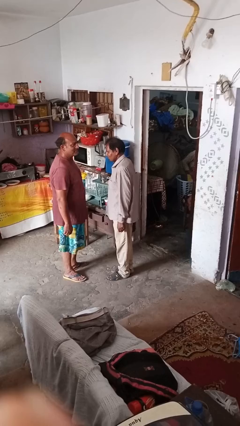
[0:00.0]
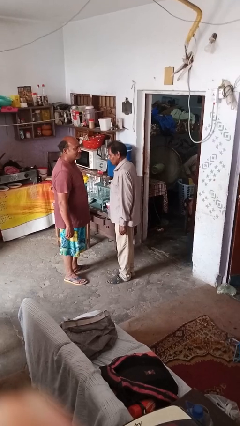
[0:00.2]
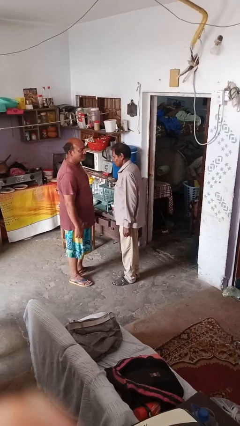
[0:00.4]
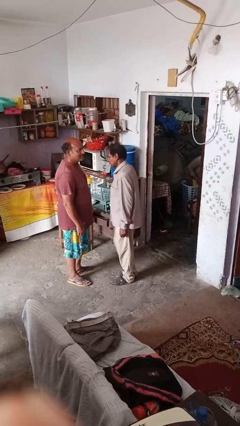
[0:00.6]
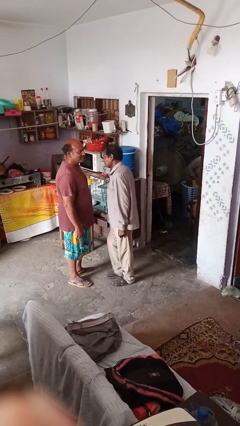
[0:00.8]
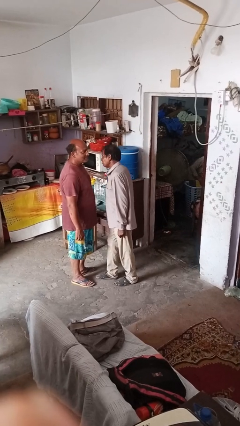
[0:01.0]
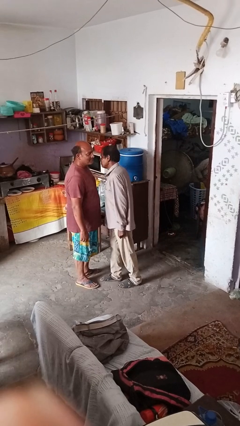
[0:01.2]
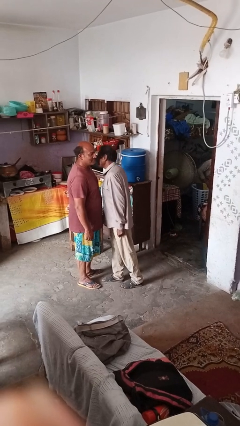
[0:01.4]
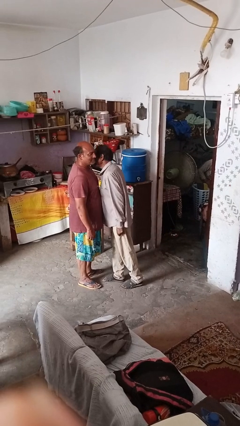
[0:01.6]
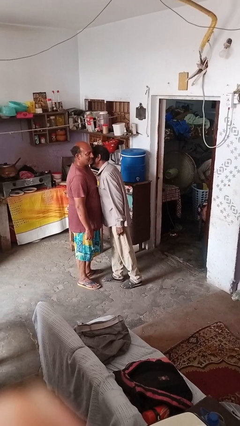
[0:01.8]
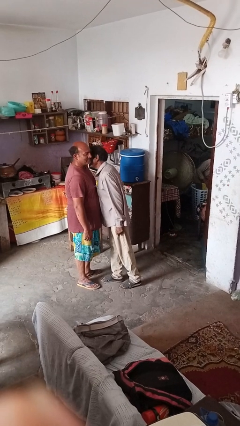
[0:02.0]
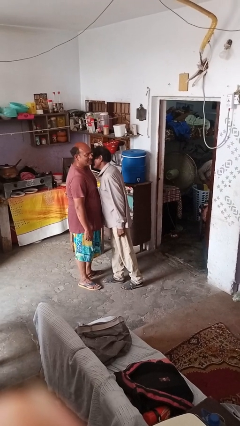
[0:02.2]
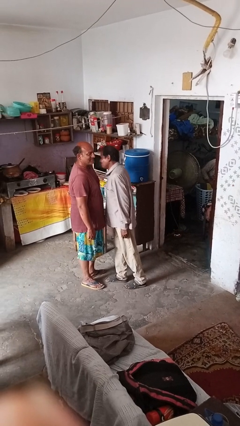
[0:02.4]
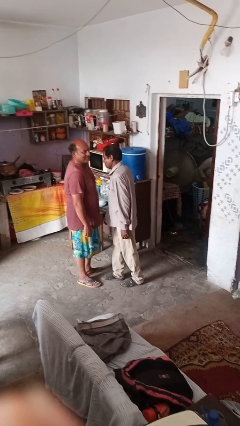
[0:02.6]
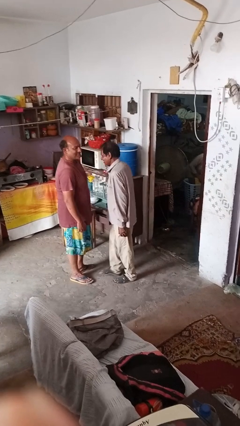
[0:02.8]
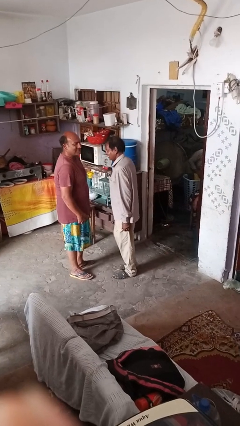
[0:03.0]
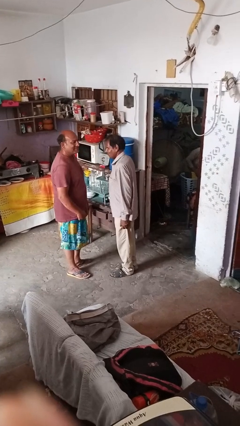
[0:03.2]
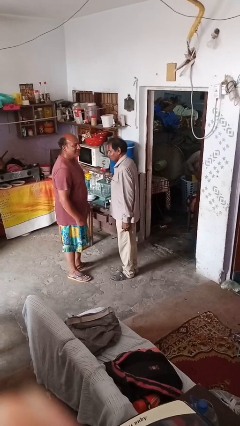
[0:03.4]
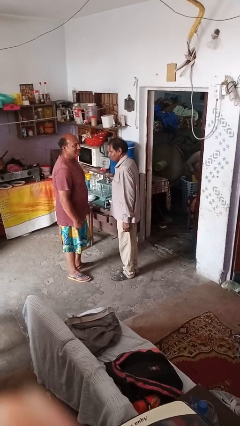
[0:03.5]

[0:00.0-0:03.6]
person kisses cheek of person

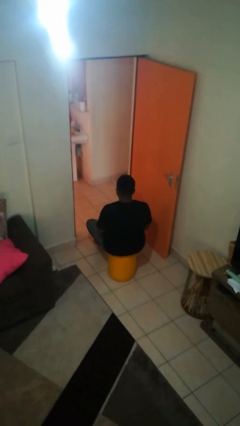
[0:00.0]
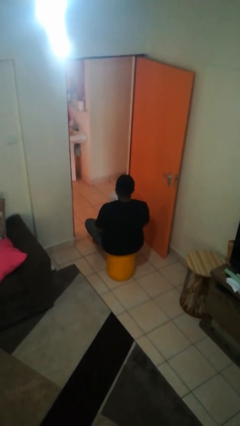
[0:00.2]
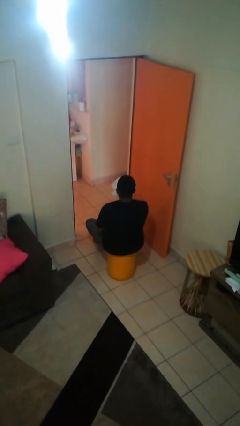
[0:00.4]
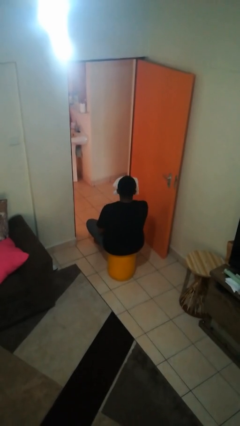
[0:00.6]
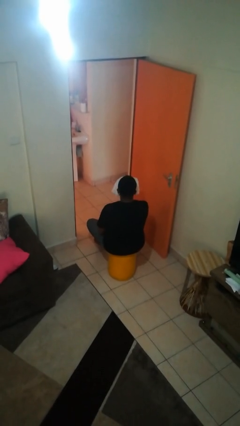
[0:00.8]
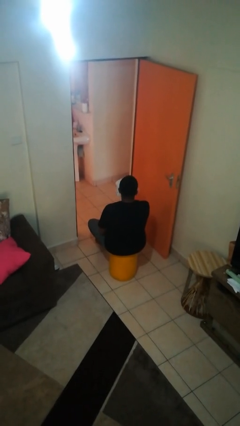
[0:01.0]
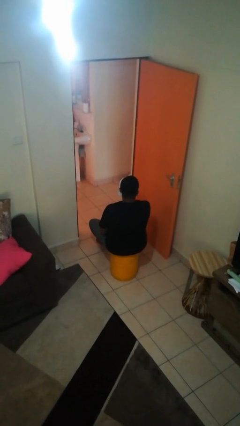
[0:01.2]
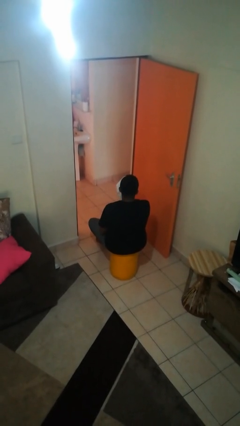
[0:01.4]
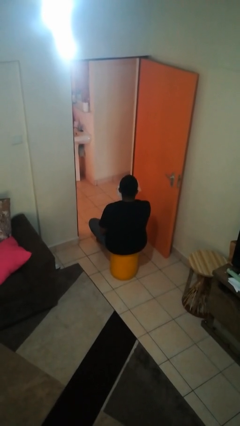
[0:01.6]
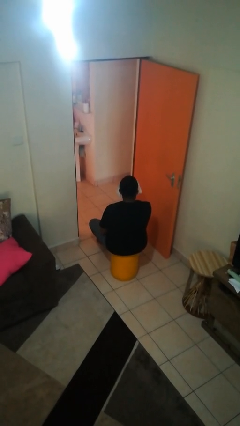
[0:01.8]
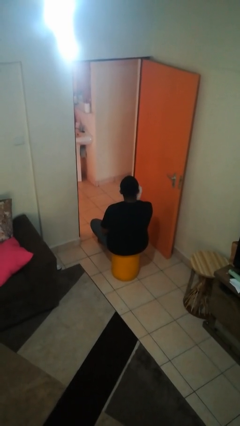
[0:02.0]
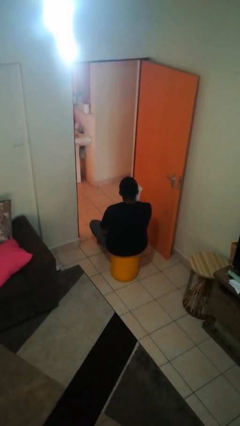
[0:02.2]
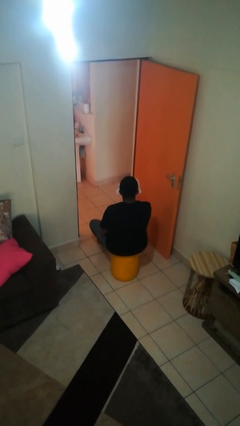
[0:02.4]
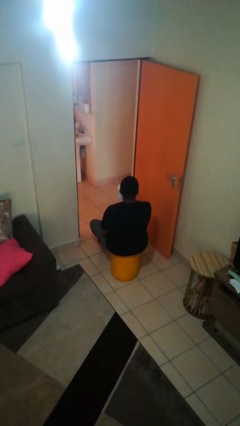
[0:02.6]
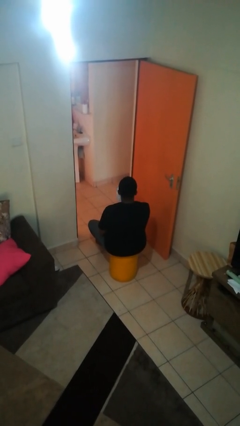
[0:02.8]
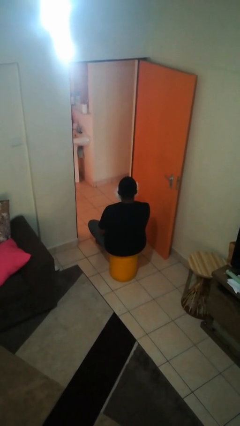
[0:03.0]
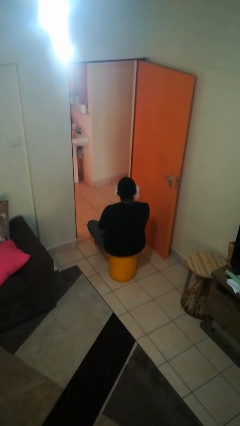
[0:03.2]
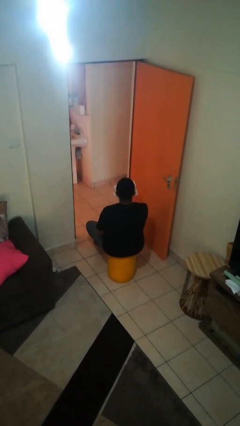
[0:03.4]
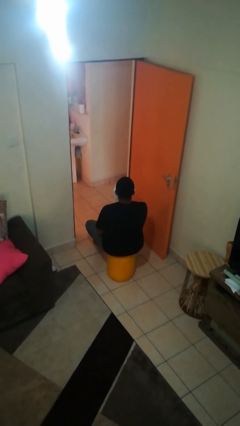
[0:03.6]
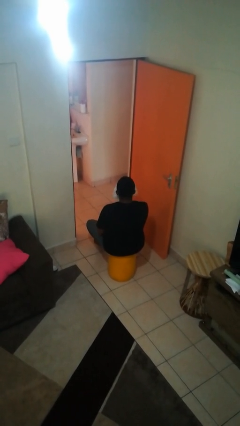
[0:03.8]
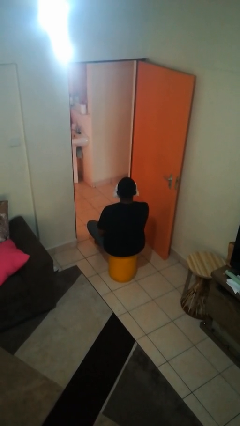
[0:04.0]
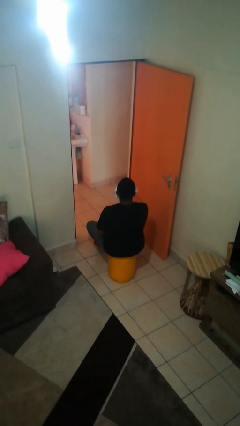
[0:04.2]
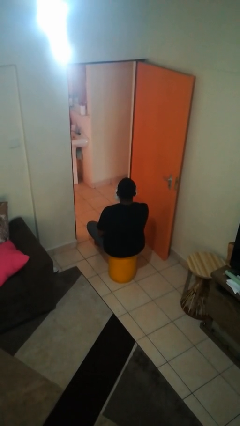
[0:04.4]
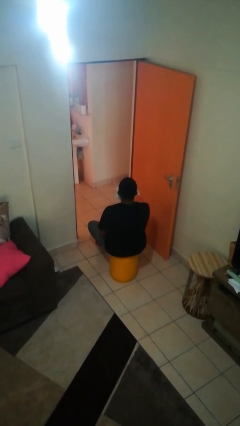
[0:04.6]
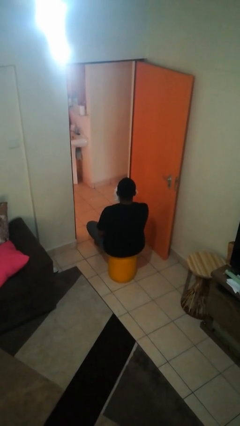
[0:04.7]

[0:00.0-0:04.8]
person wipes mouth with napkin

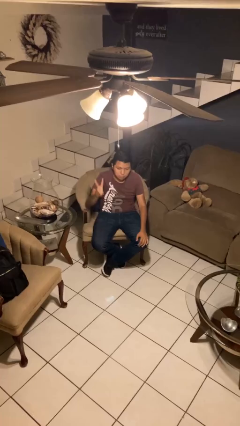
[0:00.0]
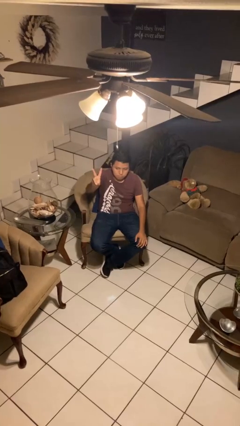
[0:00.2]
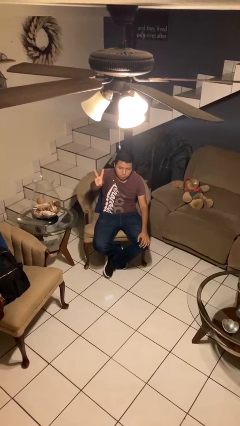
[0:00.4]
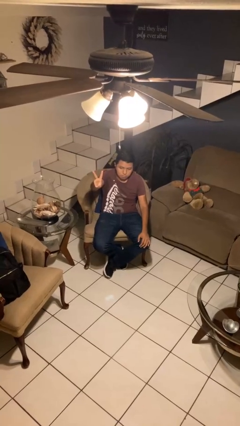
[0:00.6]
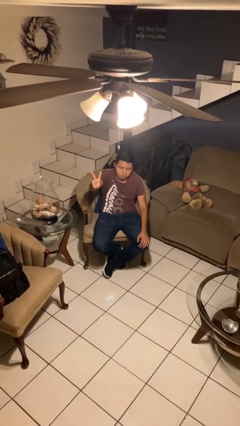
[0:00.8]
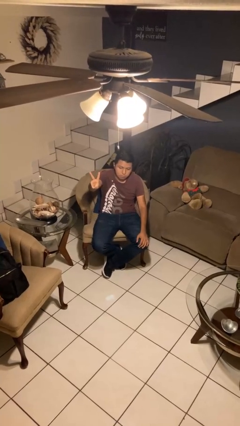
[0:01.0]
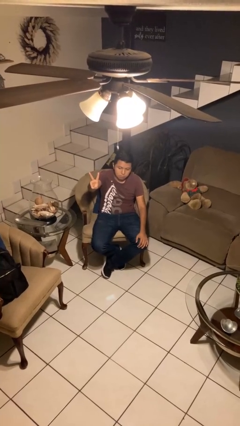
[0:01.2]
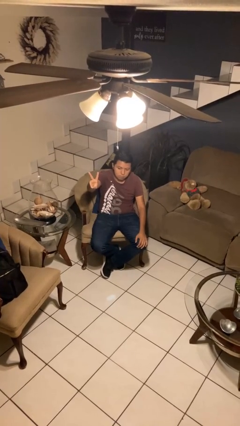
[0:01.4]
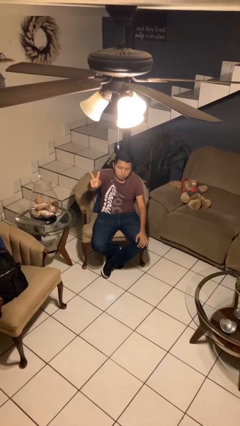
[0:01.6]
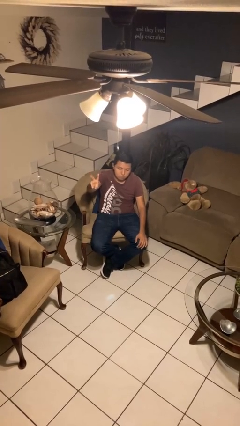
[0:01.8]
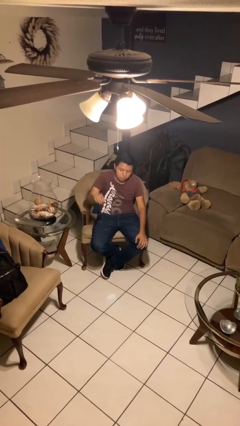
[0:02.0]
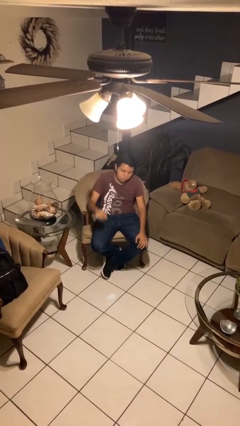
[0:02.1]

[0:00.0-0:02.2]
person gestures peace

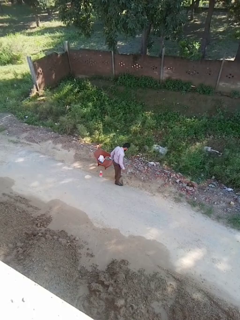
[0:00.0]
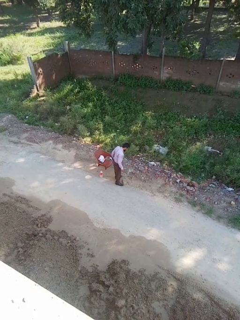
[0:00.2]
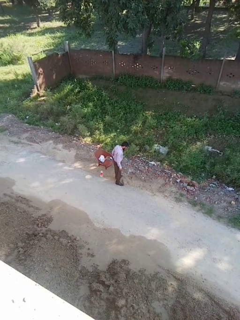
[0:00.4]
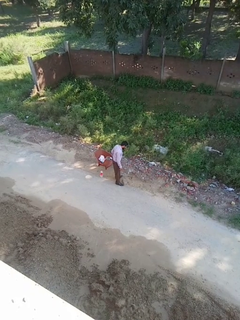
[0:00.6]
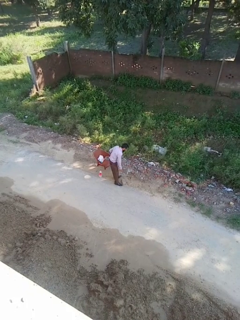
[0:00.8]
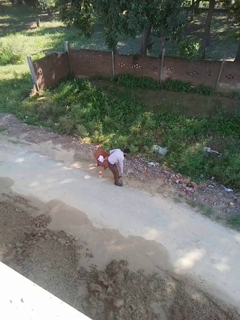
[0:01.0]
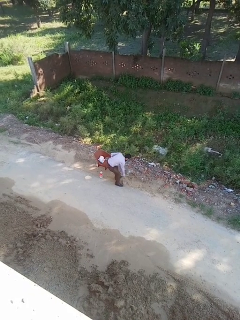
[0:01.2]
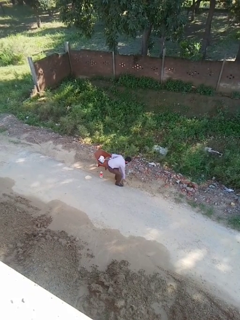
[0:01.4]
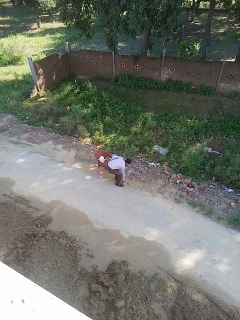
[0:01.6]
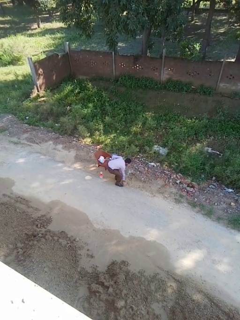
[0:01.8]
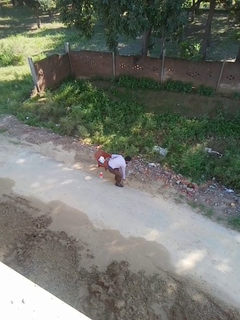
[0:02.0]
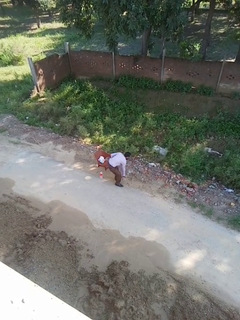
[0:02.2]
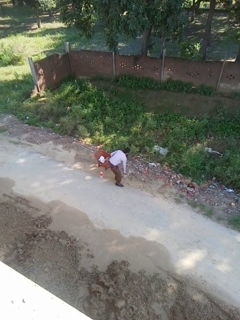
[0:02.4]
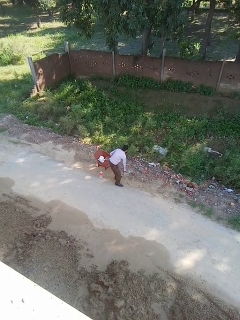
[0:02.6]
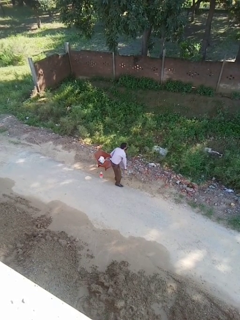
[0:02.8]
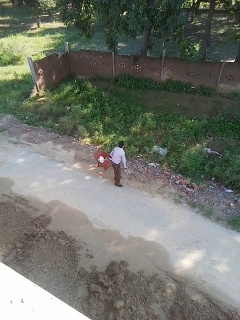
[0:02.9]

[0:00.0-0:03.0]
person picks up object from floor

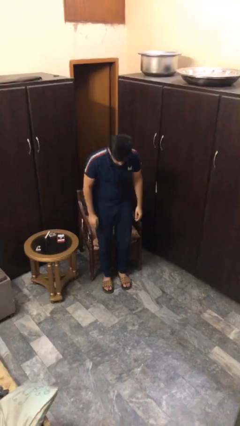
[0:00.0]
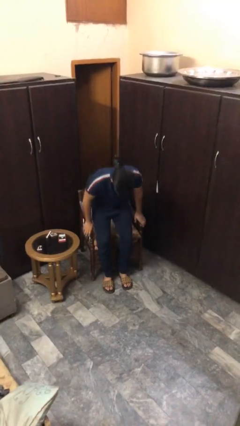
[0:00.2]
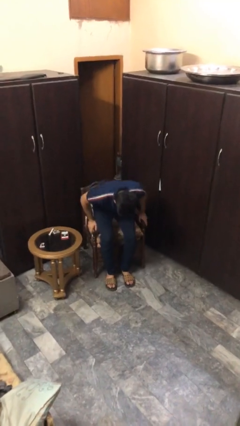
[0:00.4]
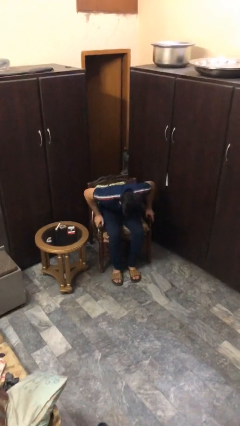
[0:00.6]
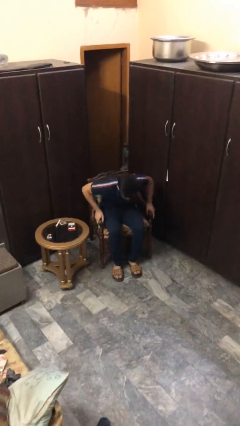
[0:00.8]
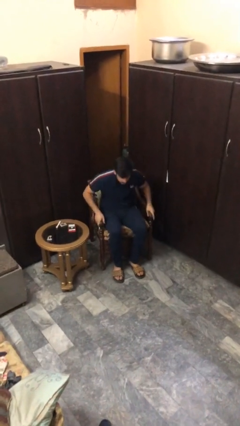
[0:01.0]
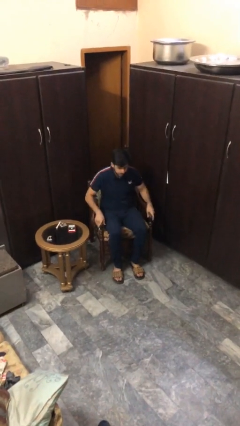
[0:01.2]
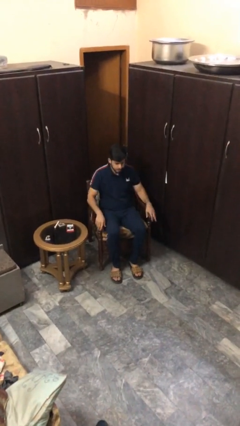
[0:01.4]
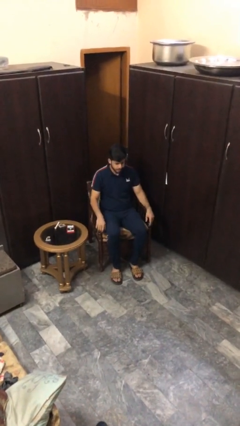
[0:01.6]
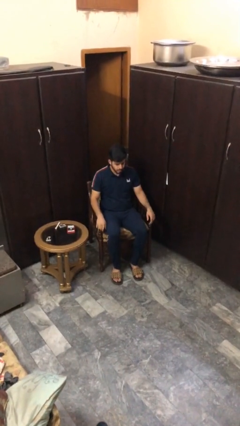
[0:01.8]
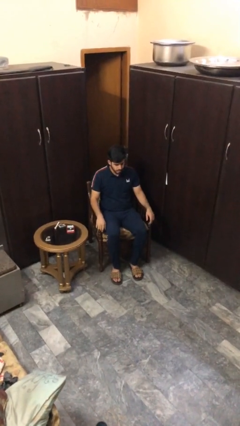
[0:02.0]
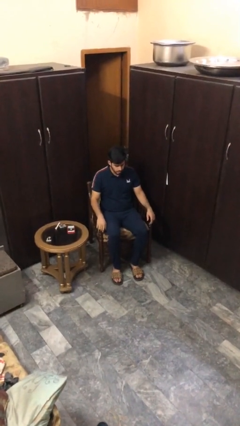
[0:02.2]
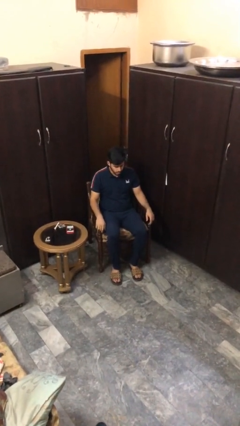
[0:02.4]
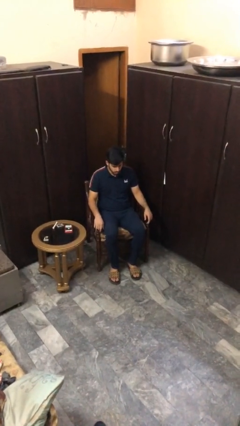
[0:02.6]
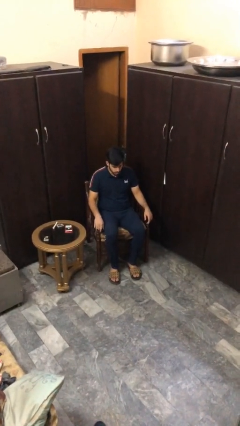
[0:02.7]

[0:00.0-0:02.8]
person sits down

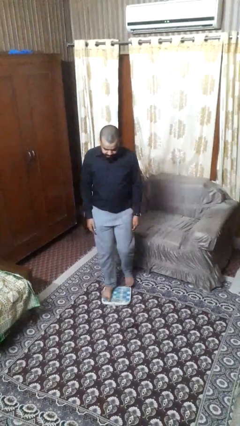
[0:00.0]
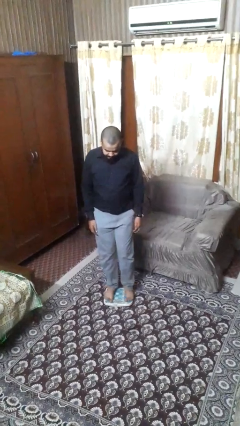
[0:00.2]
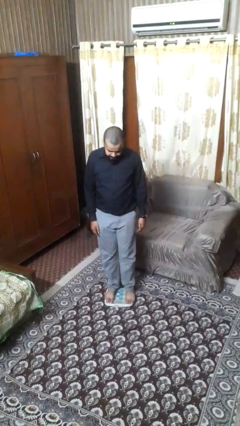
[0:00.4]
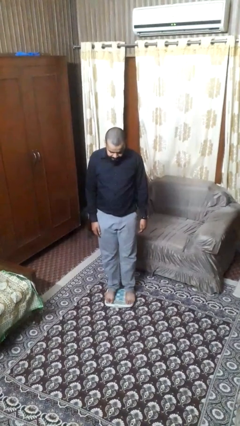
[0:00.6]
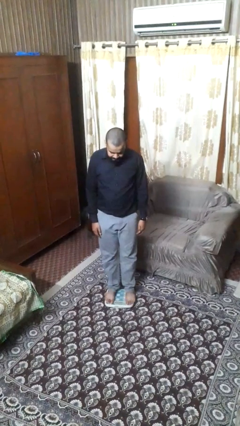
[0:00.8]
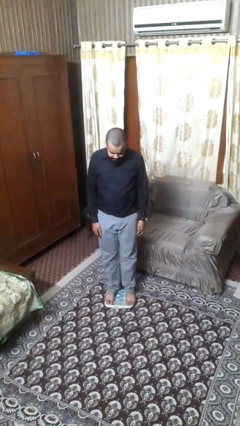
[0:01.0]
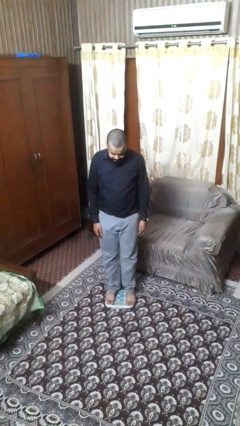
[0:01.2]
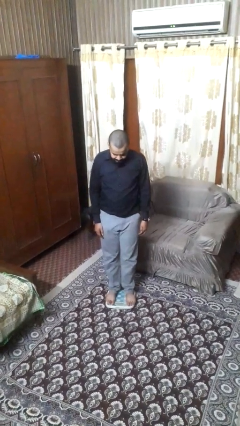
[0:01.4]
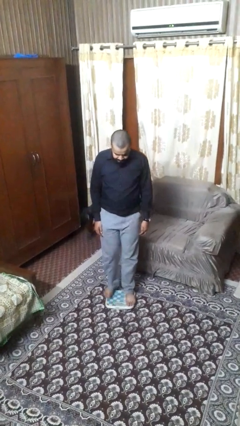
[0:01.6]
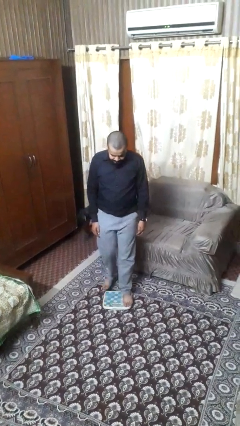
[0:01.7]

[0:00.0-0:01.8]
person uses bodyweight scale

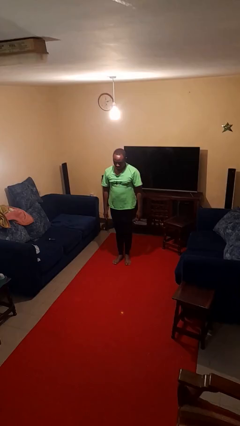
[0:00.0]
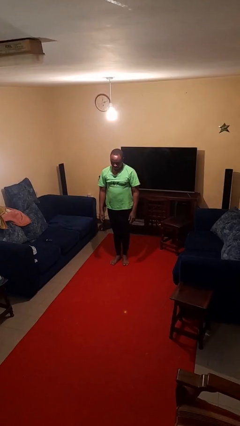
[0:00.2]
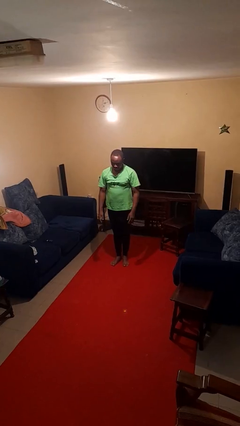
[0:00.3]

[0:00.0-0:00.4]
person stands up from floor
